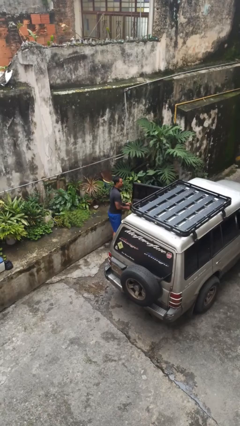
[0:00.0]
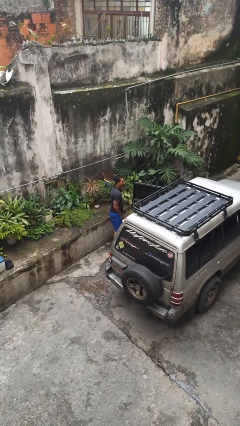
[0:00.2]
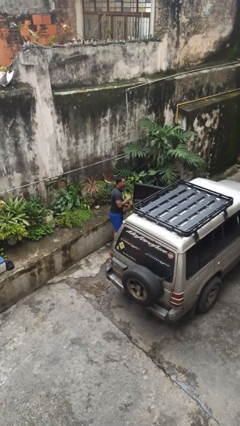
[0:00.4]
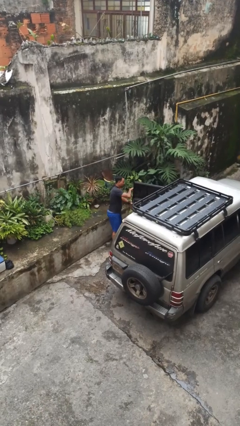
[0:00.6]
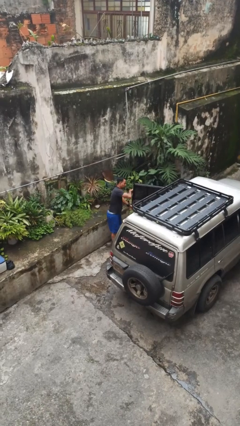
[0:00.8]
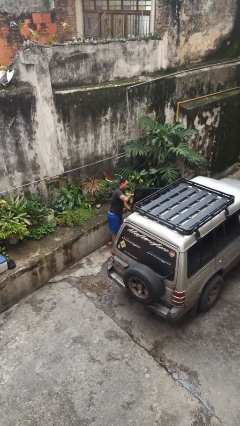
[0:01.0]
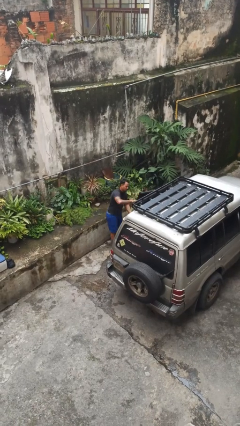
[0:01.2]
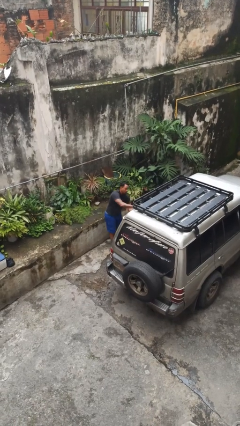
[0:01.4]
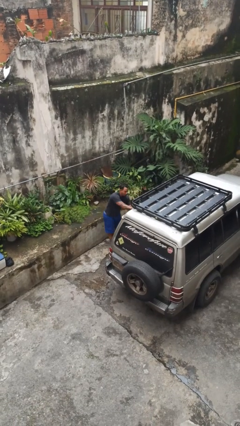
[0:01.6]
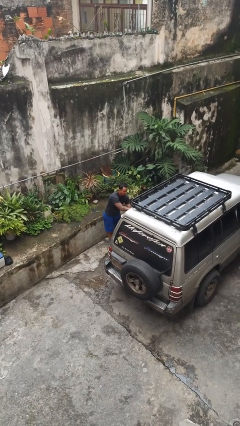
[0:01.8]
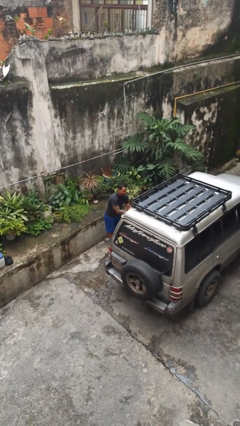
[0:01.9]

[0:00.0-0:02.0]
person closes car door

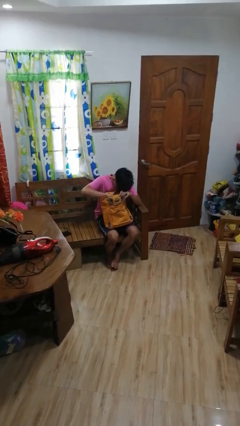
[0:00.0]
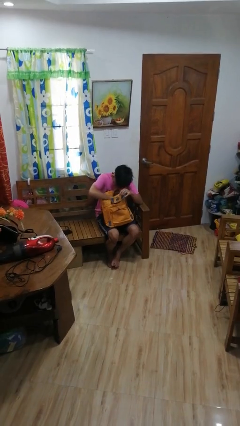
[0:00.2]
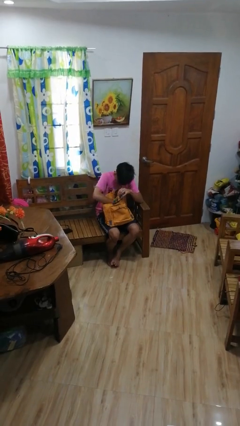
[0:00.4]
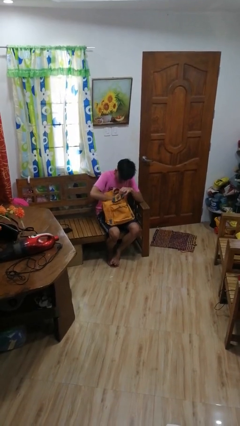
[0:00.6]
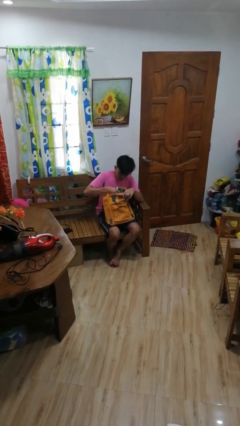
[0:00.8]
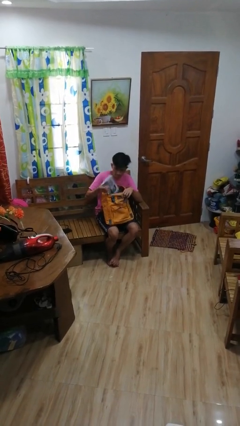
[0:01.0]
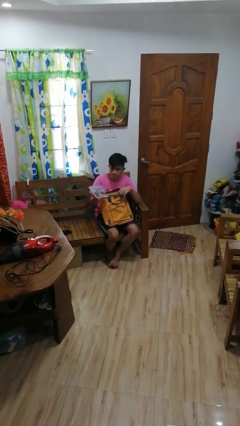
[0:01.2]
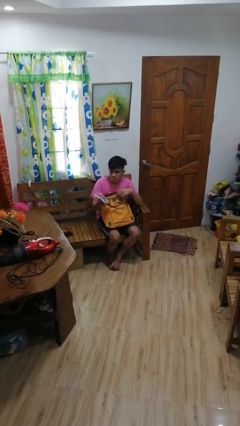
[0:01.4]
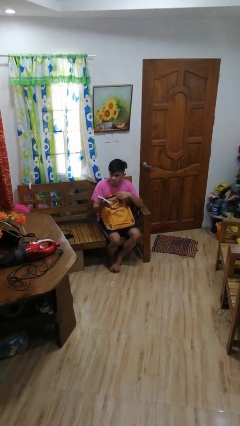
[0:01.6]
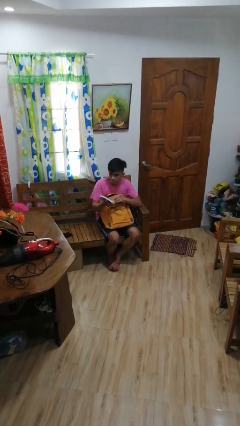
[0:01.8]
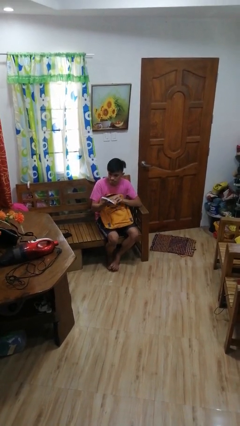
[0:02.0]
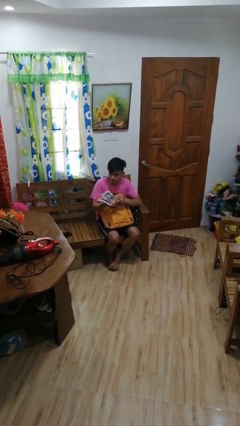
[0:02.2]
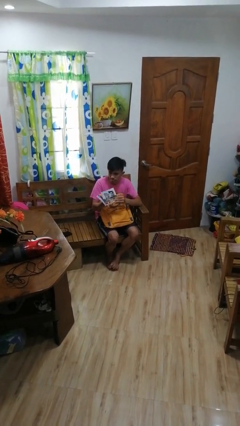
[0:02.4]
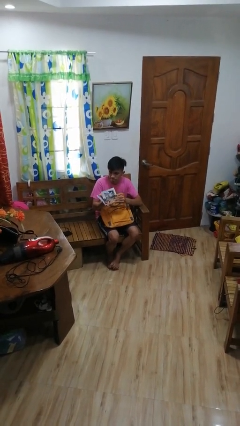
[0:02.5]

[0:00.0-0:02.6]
person takes object from backpack

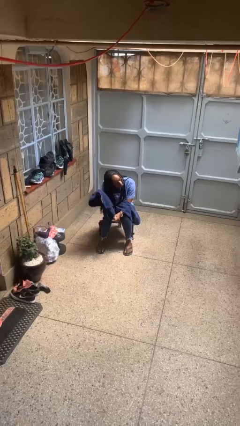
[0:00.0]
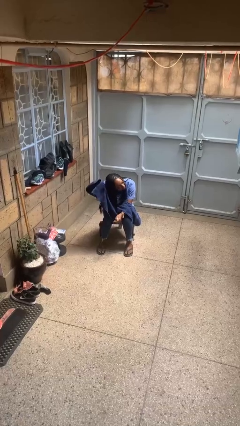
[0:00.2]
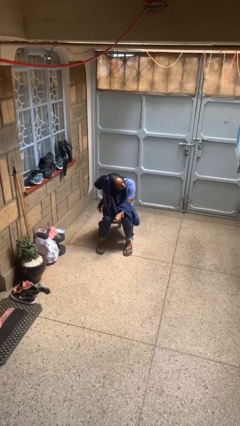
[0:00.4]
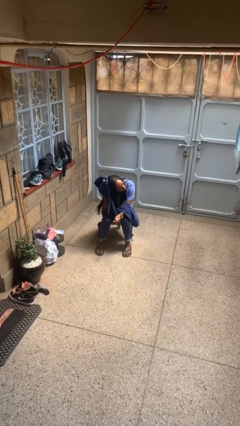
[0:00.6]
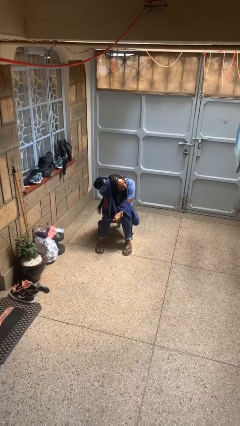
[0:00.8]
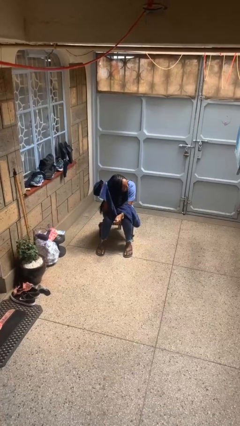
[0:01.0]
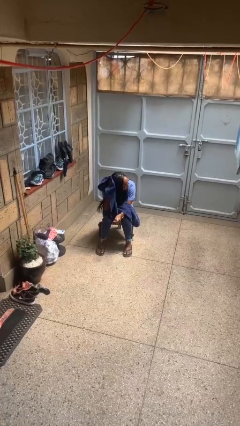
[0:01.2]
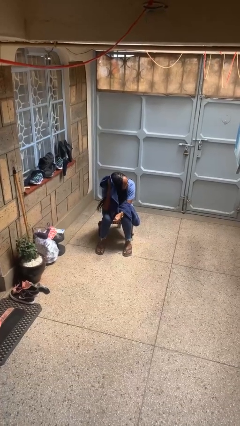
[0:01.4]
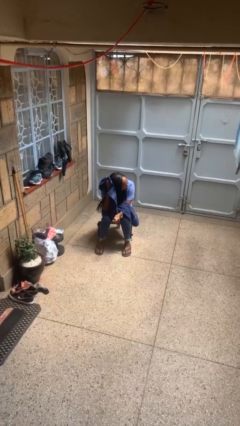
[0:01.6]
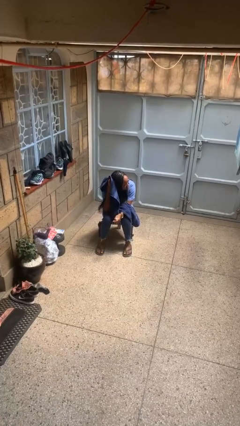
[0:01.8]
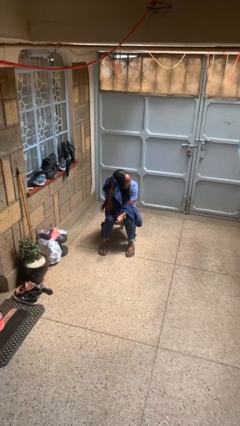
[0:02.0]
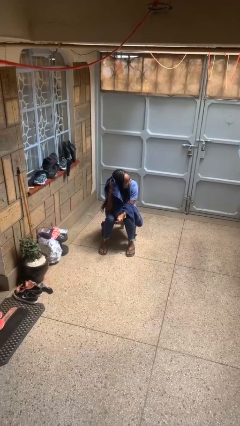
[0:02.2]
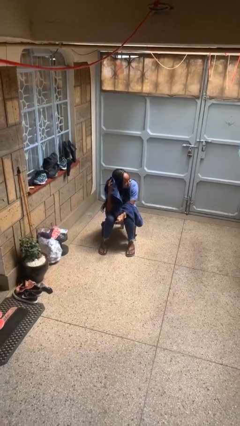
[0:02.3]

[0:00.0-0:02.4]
person dries hair with towel

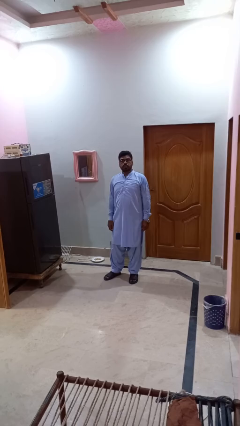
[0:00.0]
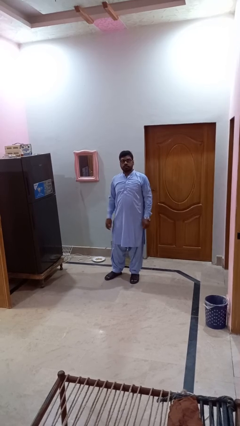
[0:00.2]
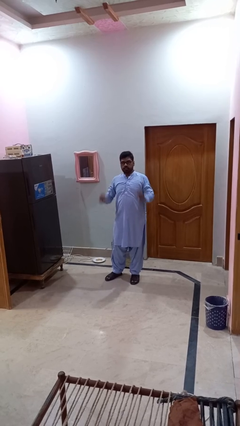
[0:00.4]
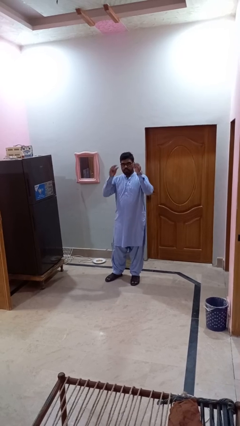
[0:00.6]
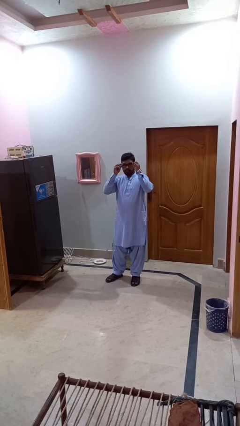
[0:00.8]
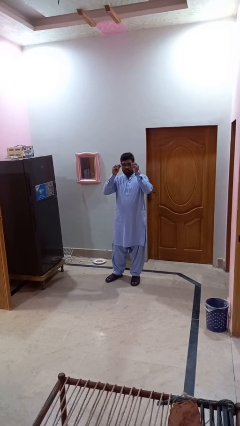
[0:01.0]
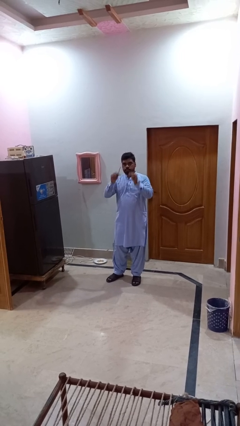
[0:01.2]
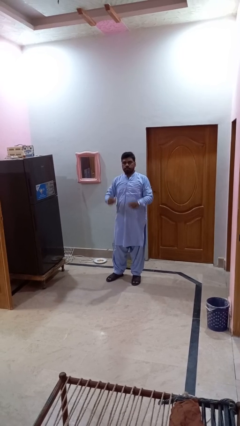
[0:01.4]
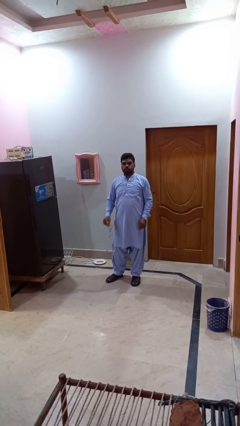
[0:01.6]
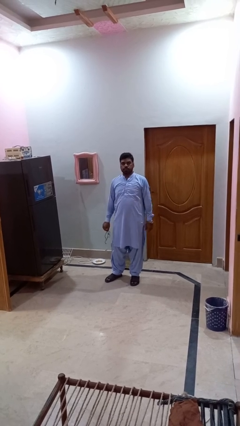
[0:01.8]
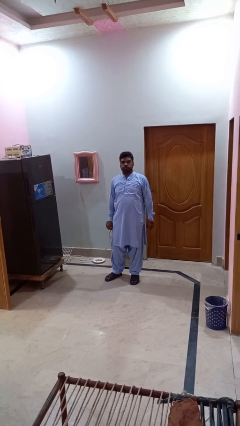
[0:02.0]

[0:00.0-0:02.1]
person takes off glasses

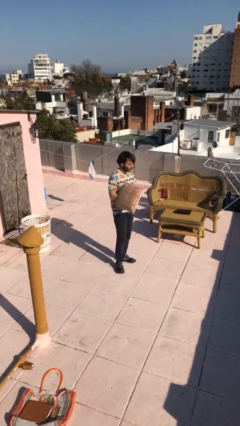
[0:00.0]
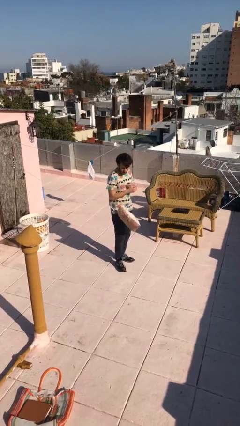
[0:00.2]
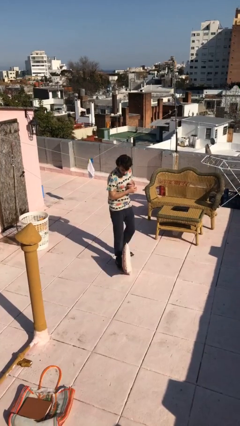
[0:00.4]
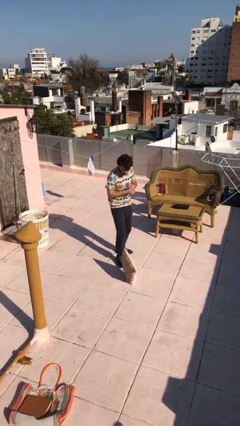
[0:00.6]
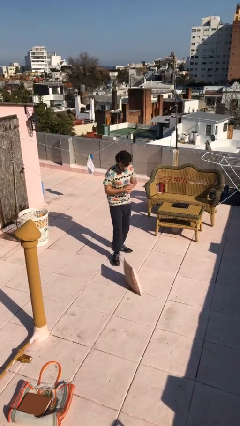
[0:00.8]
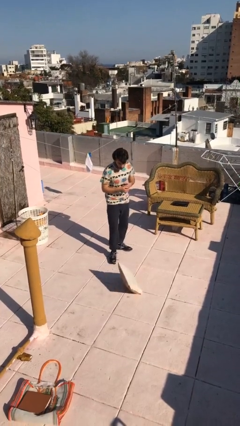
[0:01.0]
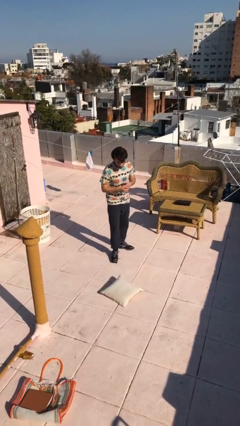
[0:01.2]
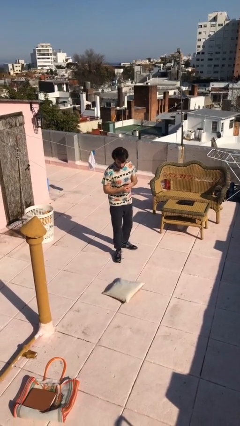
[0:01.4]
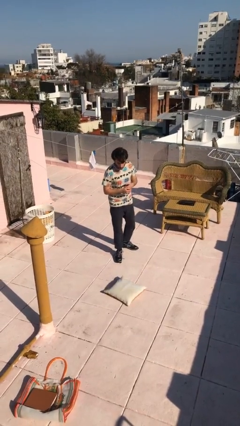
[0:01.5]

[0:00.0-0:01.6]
person drops object

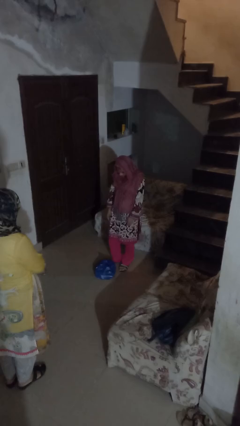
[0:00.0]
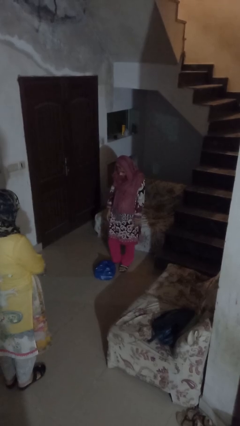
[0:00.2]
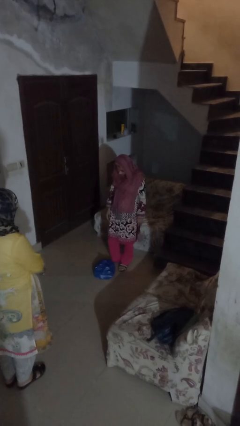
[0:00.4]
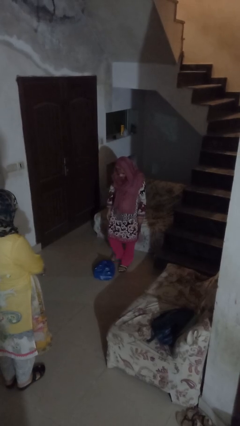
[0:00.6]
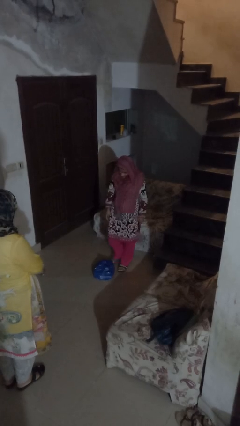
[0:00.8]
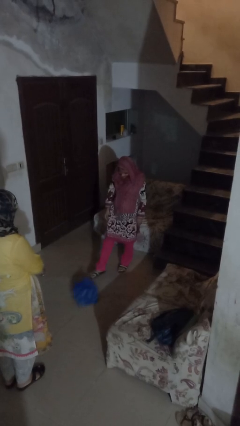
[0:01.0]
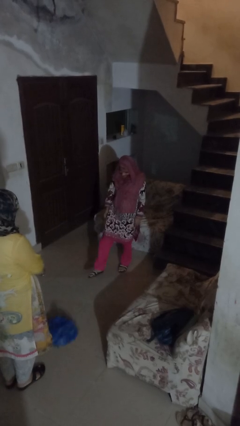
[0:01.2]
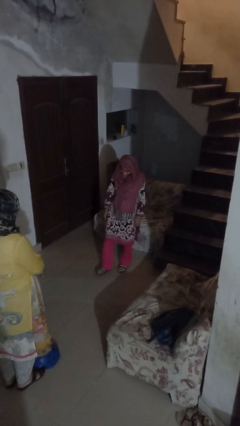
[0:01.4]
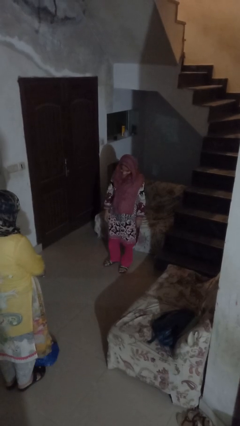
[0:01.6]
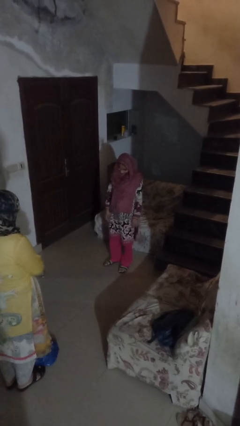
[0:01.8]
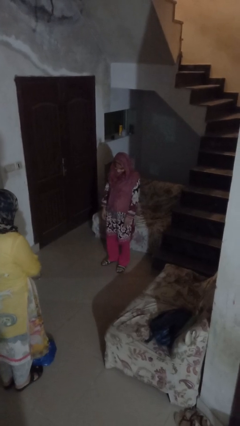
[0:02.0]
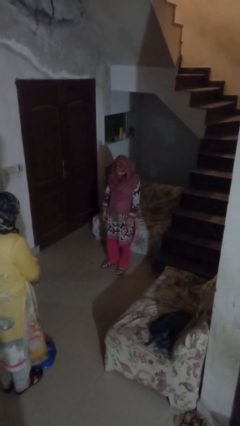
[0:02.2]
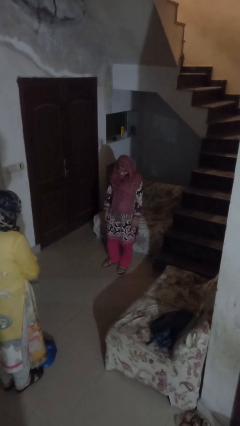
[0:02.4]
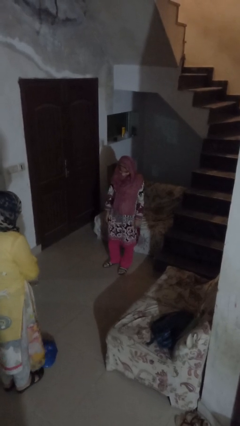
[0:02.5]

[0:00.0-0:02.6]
person kicks object to person

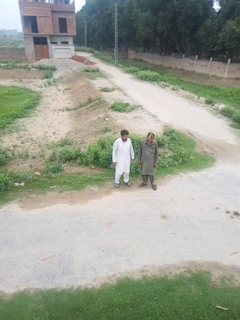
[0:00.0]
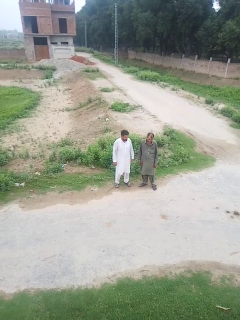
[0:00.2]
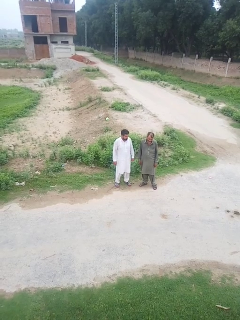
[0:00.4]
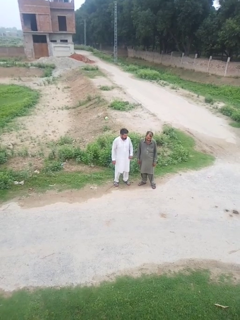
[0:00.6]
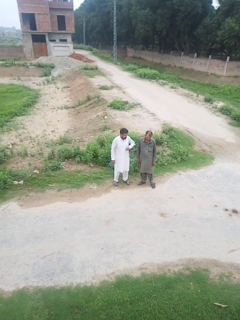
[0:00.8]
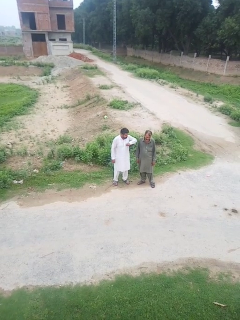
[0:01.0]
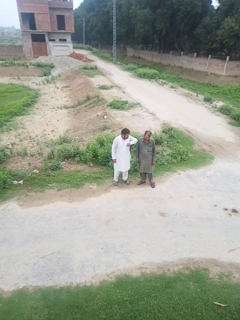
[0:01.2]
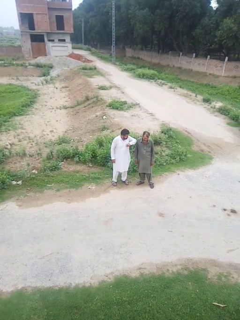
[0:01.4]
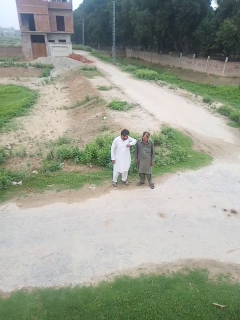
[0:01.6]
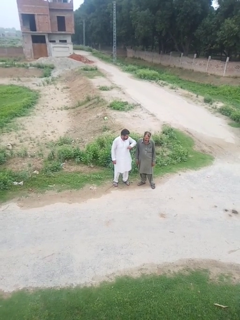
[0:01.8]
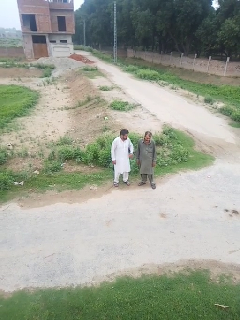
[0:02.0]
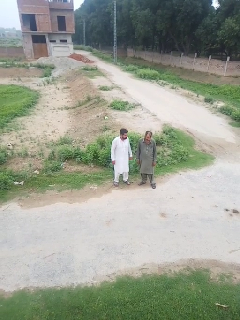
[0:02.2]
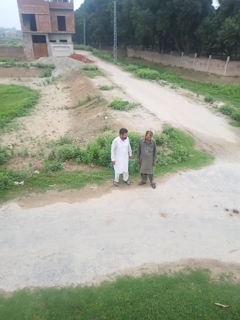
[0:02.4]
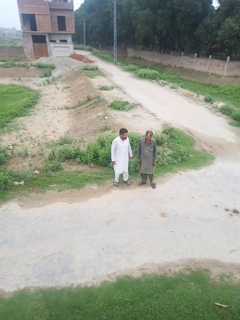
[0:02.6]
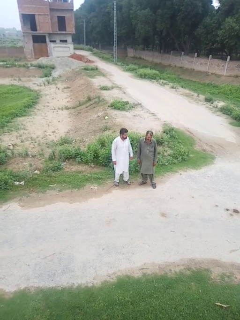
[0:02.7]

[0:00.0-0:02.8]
person nudges person with elbow

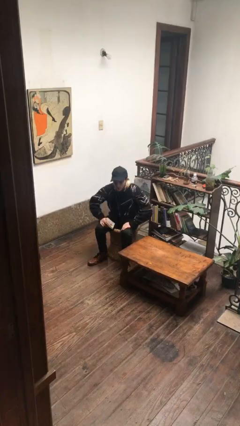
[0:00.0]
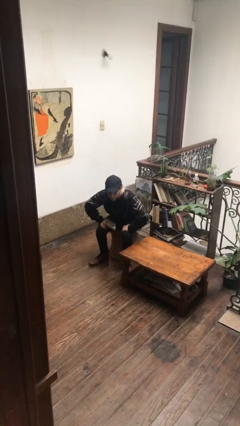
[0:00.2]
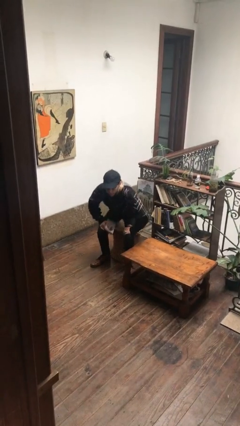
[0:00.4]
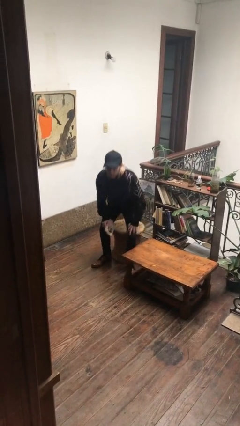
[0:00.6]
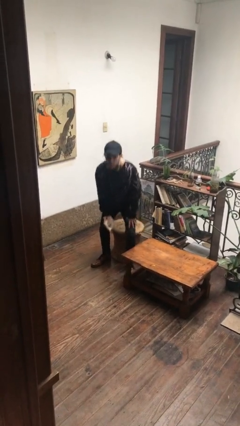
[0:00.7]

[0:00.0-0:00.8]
person stands up

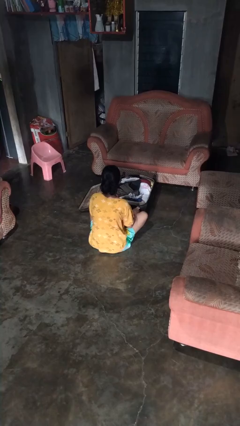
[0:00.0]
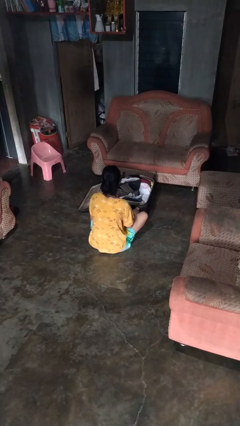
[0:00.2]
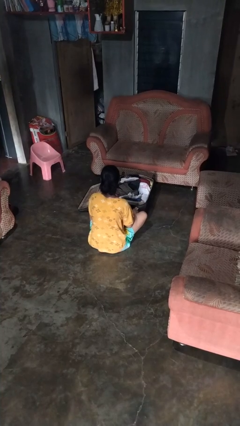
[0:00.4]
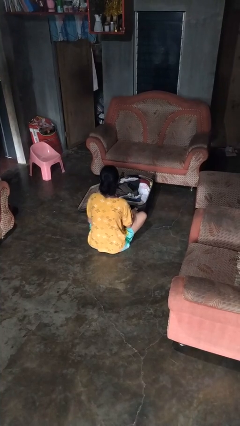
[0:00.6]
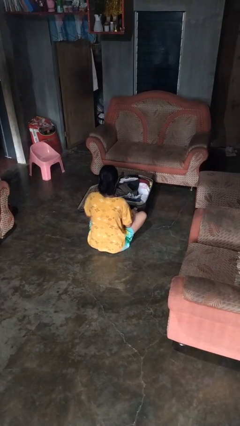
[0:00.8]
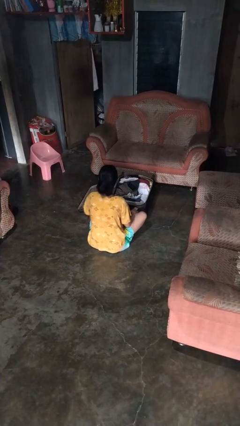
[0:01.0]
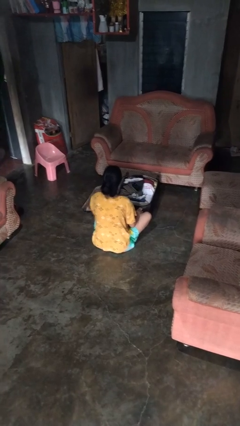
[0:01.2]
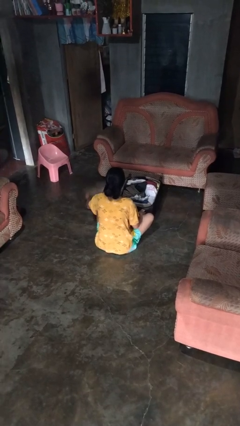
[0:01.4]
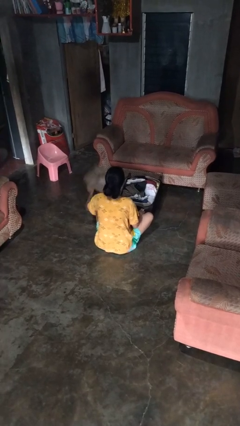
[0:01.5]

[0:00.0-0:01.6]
person closes suitcase
